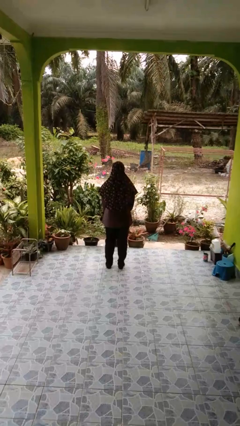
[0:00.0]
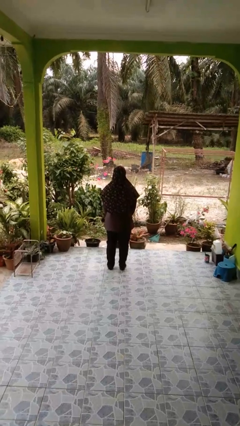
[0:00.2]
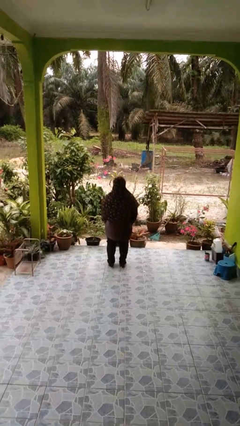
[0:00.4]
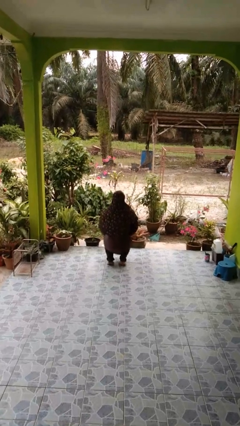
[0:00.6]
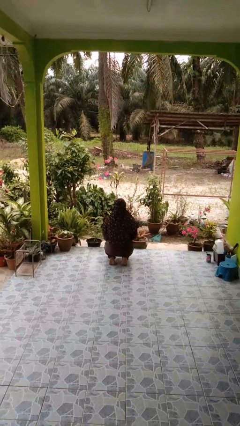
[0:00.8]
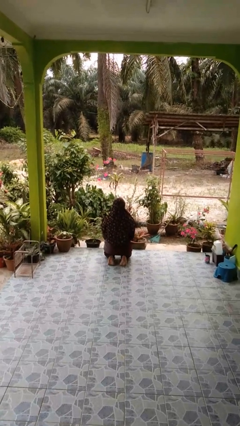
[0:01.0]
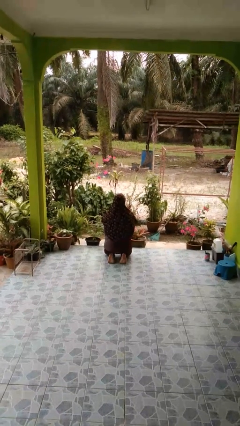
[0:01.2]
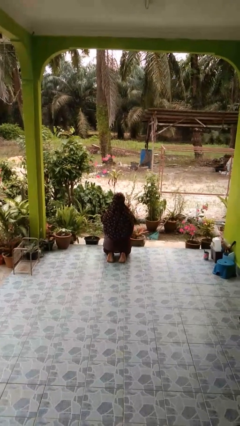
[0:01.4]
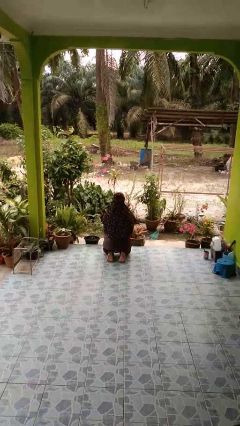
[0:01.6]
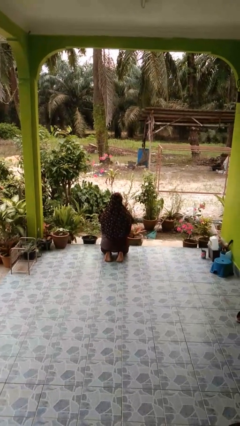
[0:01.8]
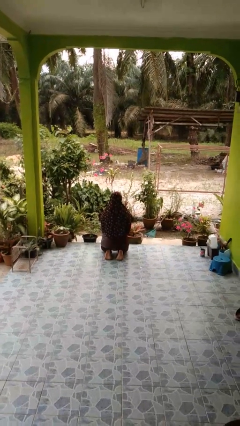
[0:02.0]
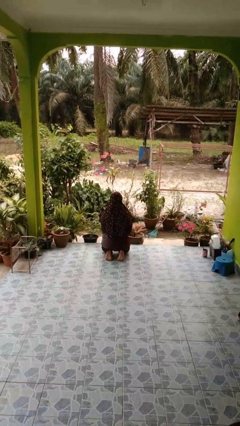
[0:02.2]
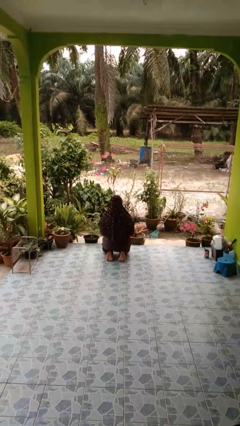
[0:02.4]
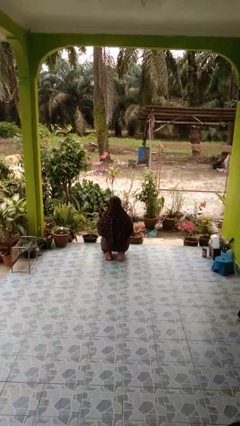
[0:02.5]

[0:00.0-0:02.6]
person kneels

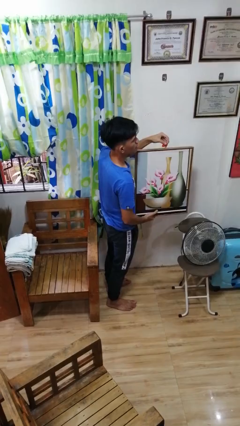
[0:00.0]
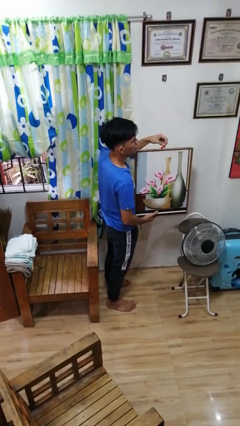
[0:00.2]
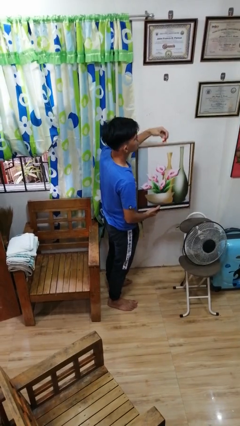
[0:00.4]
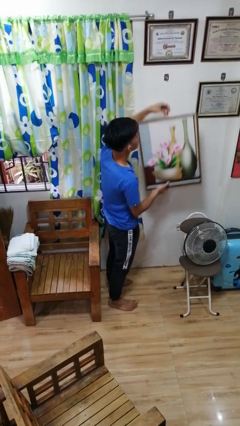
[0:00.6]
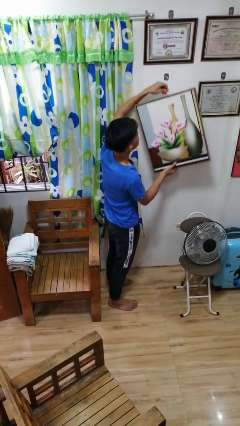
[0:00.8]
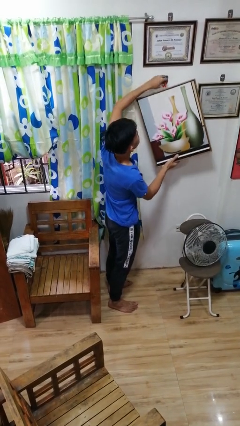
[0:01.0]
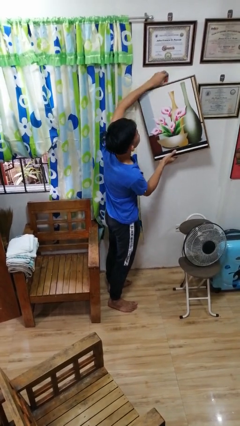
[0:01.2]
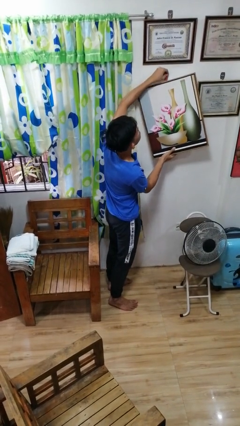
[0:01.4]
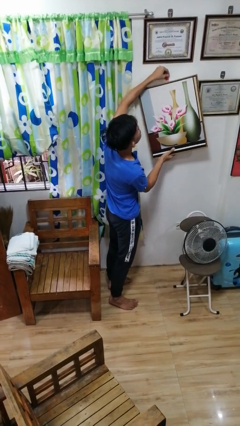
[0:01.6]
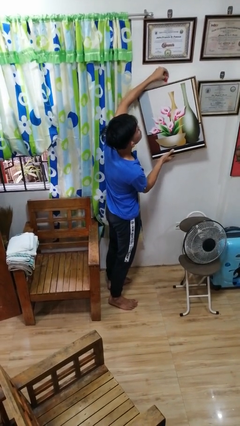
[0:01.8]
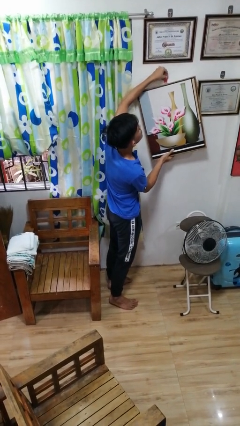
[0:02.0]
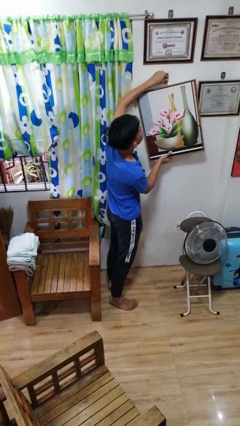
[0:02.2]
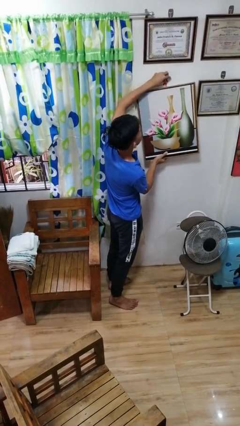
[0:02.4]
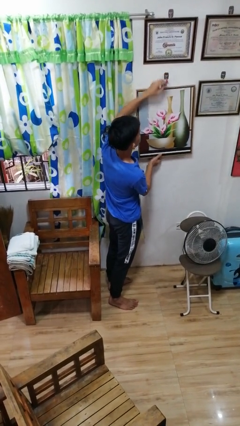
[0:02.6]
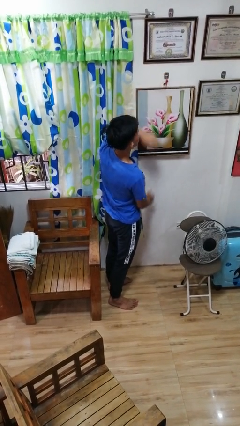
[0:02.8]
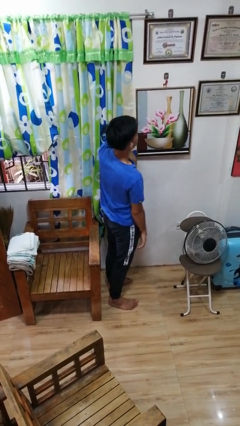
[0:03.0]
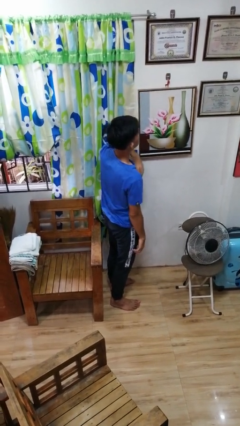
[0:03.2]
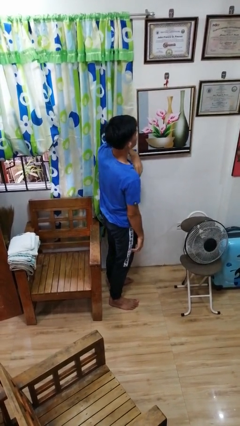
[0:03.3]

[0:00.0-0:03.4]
person puts up picture frame

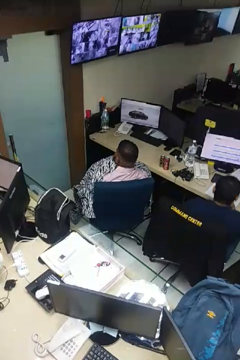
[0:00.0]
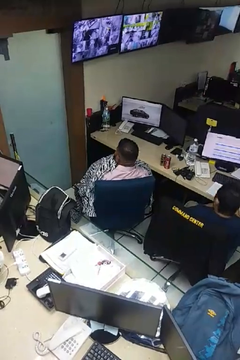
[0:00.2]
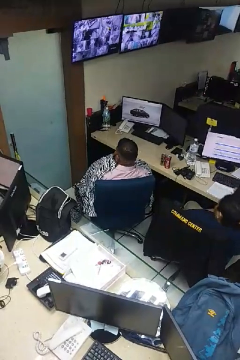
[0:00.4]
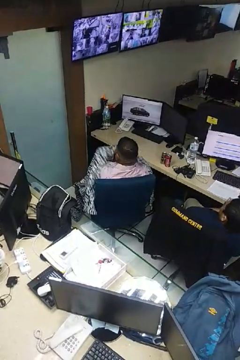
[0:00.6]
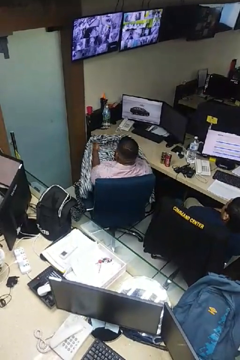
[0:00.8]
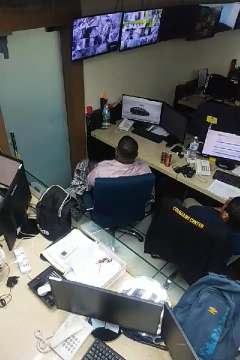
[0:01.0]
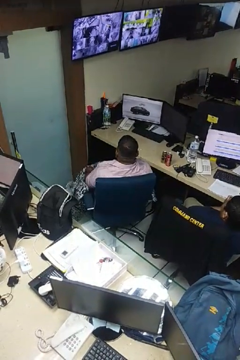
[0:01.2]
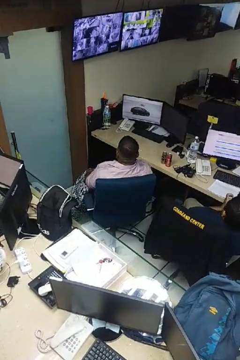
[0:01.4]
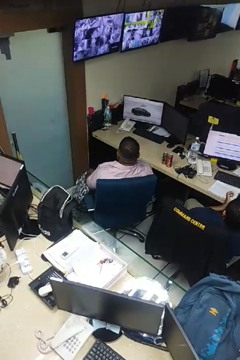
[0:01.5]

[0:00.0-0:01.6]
person uncovers with blanket

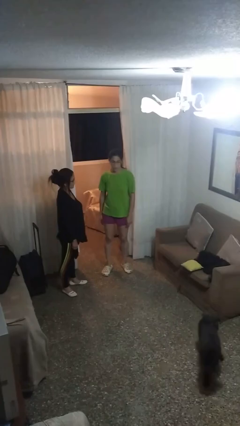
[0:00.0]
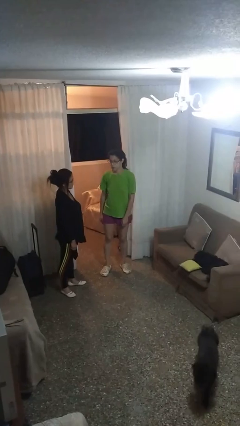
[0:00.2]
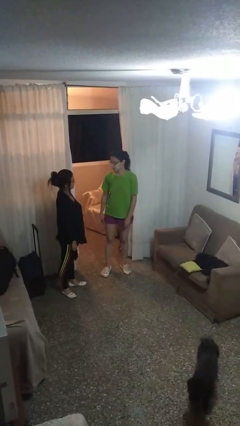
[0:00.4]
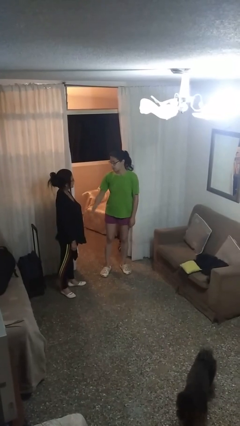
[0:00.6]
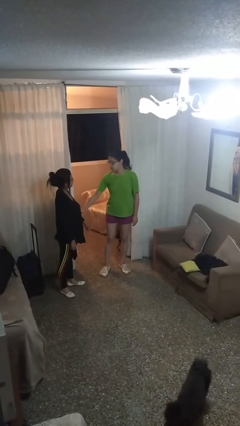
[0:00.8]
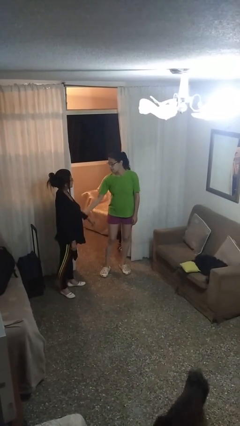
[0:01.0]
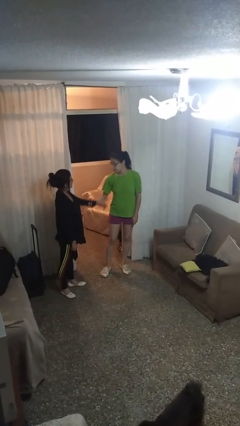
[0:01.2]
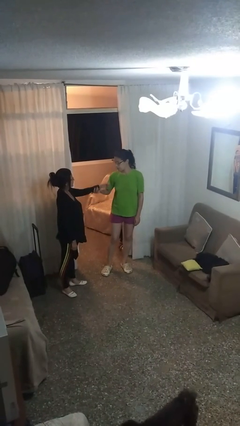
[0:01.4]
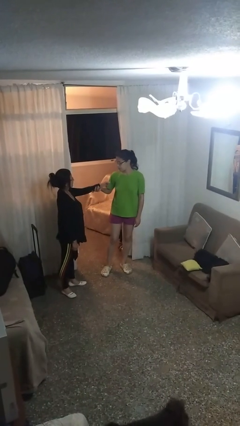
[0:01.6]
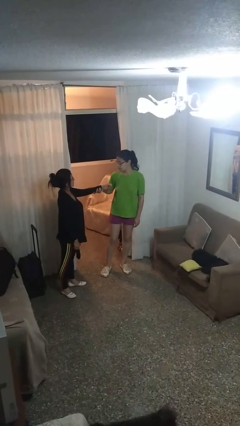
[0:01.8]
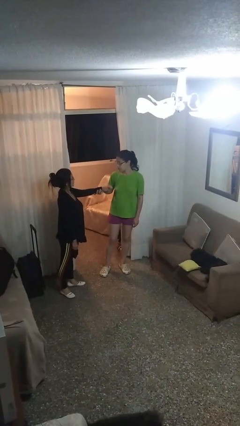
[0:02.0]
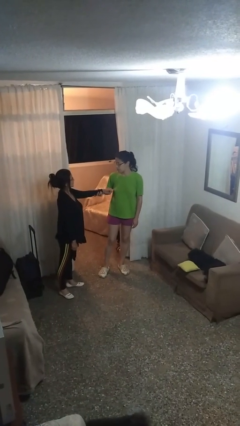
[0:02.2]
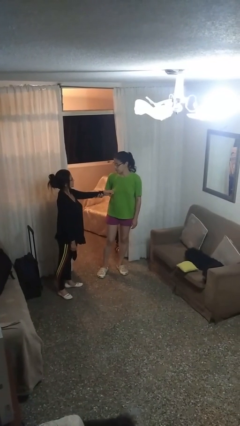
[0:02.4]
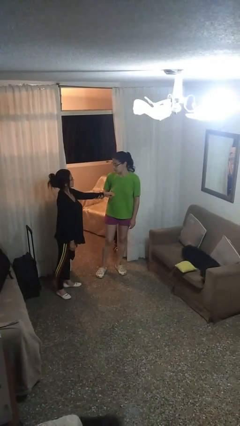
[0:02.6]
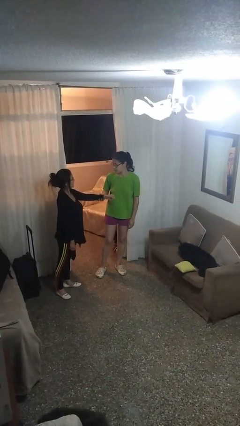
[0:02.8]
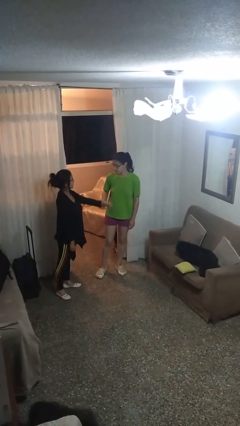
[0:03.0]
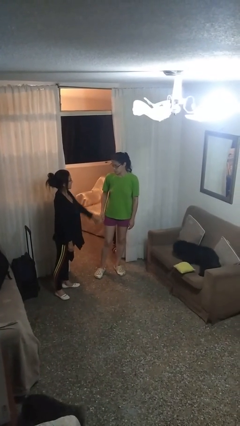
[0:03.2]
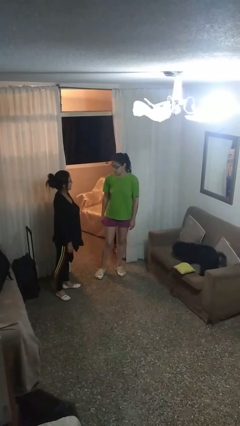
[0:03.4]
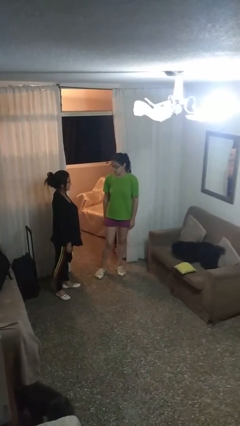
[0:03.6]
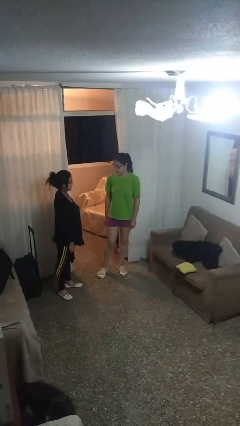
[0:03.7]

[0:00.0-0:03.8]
person grabs person by forearm

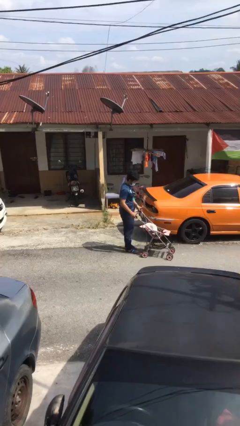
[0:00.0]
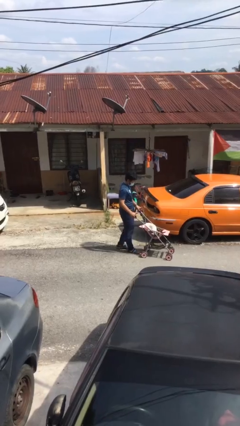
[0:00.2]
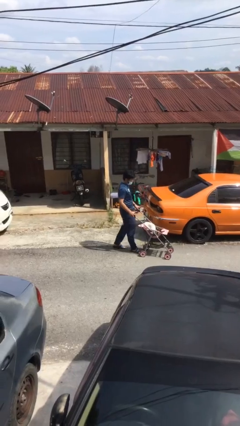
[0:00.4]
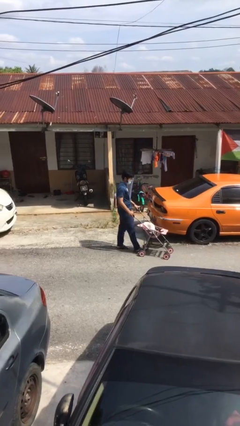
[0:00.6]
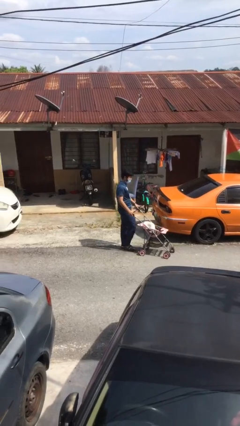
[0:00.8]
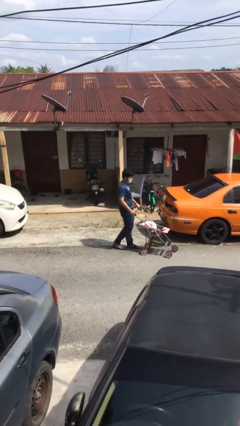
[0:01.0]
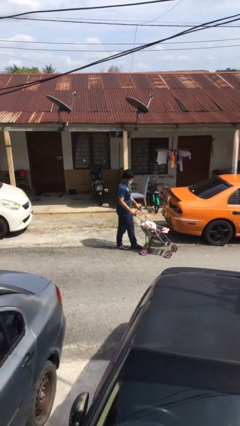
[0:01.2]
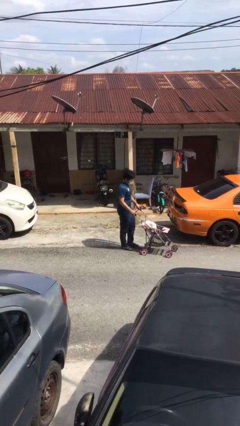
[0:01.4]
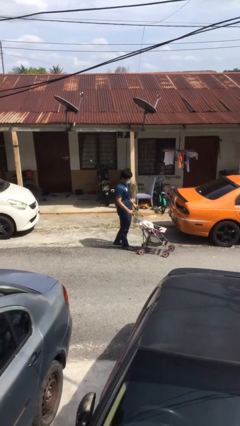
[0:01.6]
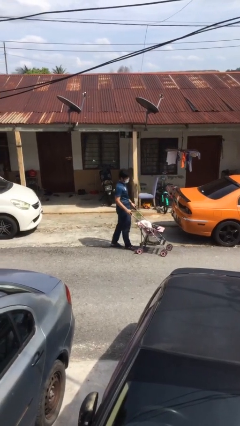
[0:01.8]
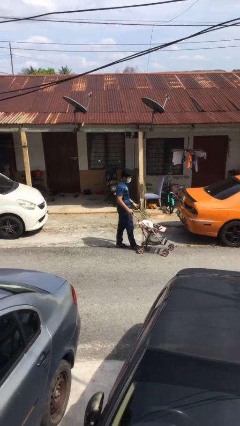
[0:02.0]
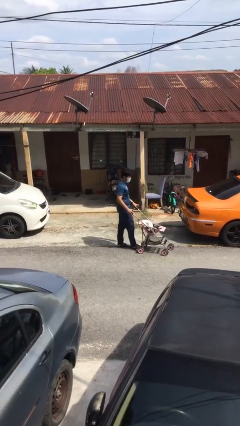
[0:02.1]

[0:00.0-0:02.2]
person pulls wheeled cart

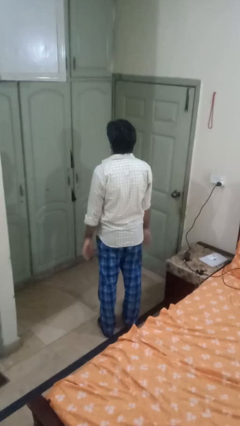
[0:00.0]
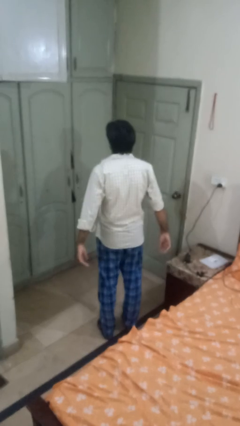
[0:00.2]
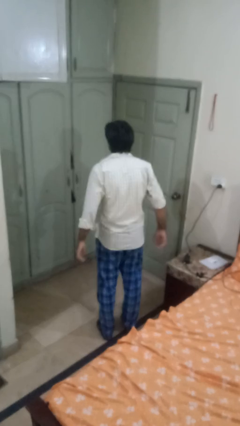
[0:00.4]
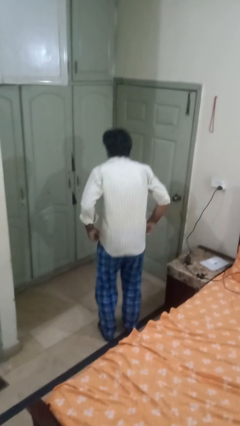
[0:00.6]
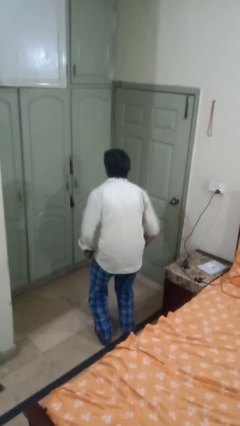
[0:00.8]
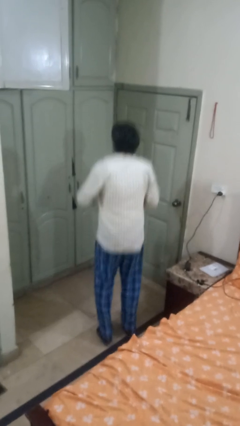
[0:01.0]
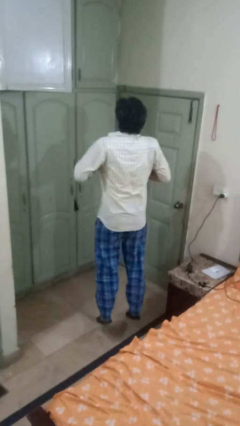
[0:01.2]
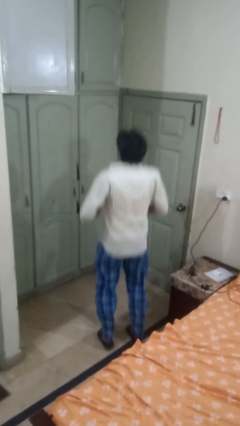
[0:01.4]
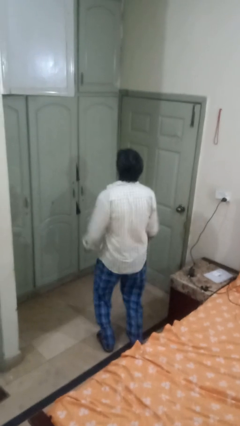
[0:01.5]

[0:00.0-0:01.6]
person jumps

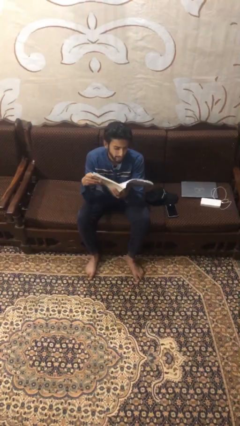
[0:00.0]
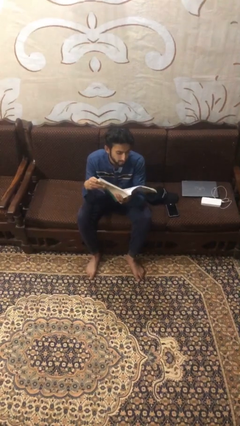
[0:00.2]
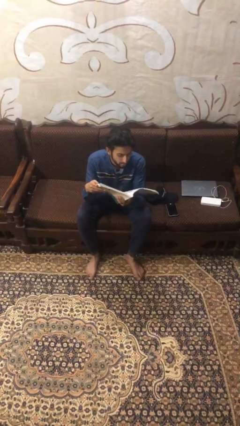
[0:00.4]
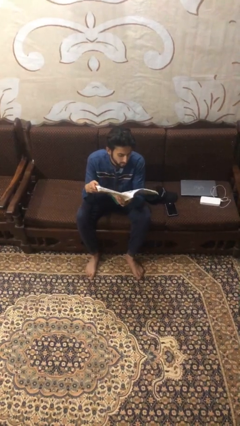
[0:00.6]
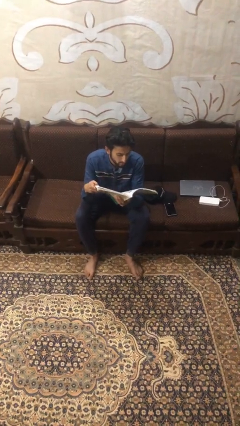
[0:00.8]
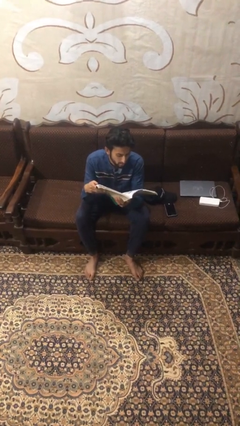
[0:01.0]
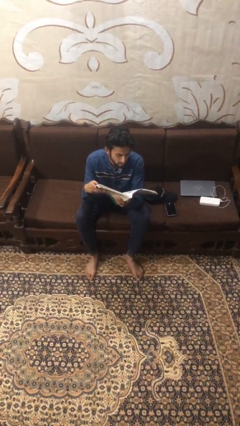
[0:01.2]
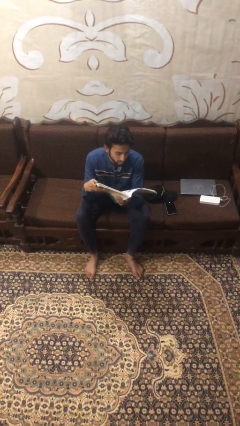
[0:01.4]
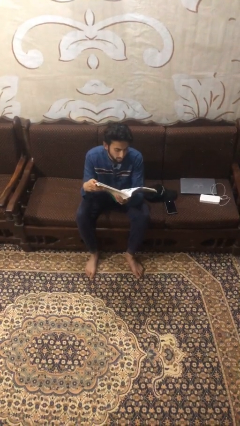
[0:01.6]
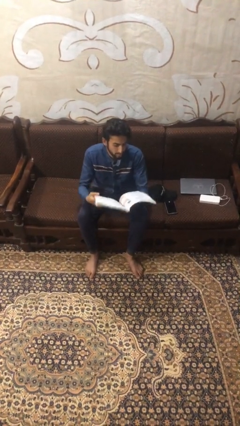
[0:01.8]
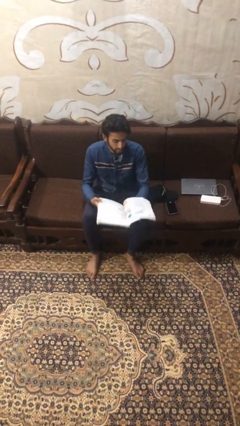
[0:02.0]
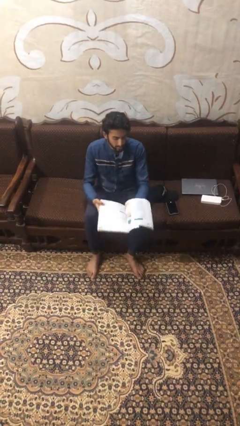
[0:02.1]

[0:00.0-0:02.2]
person reads document

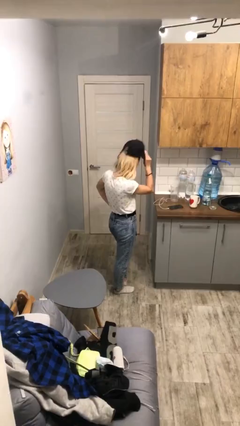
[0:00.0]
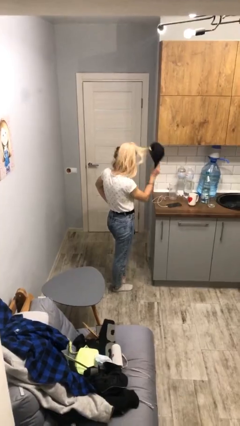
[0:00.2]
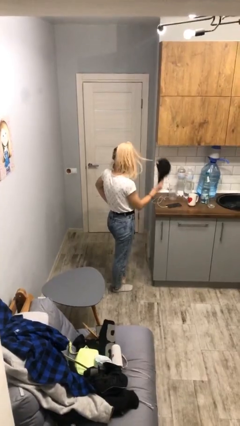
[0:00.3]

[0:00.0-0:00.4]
person takes off hat
